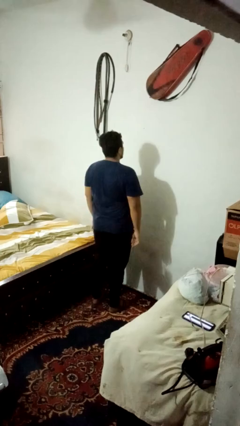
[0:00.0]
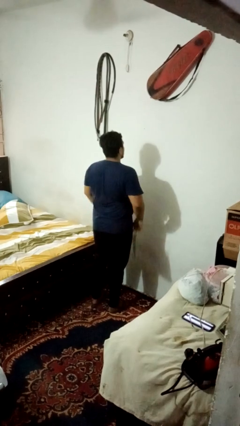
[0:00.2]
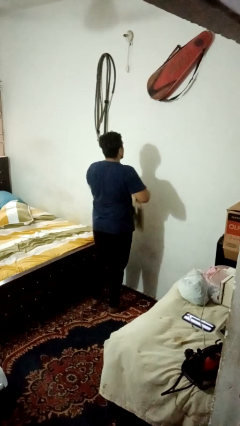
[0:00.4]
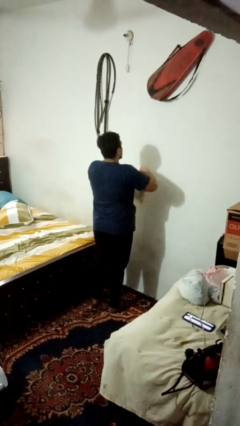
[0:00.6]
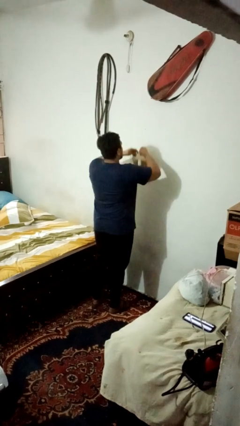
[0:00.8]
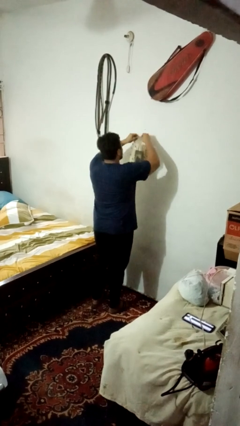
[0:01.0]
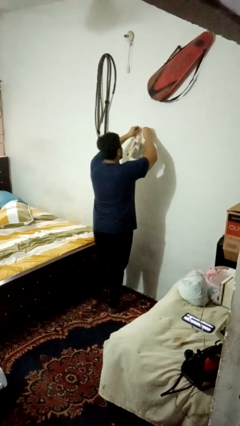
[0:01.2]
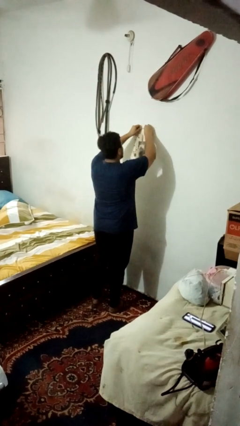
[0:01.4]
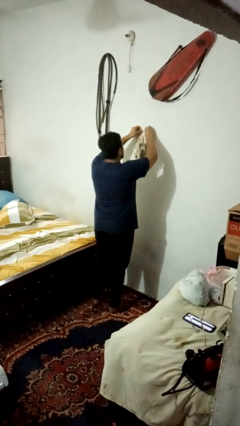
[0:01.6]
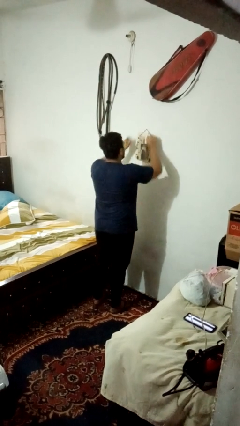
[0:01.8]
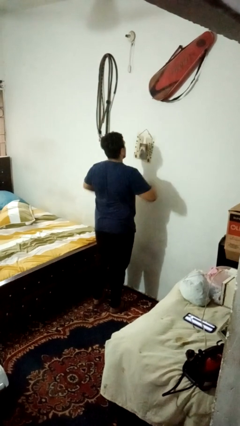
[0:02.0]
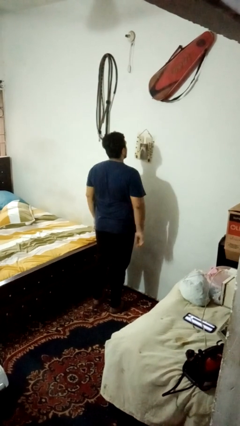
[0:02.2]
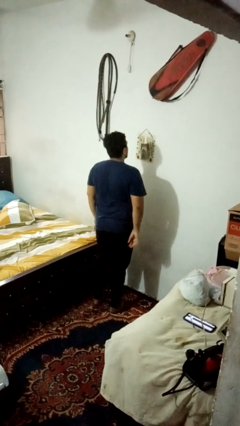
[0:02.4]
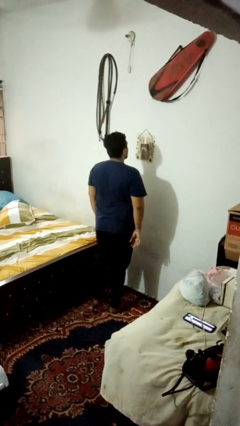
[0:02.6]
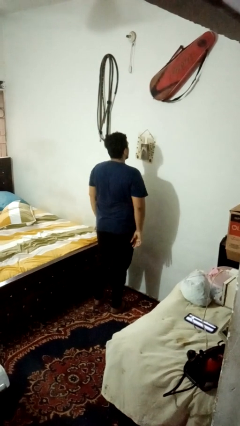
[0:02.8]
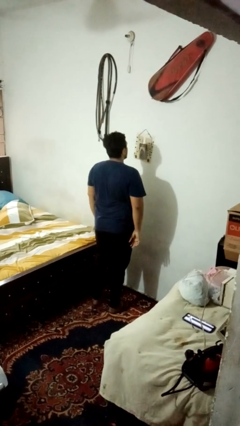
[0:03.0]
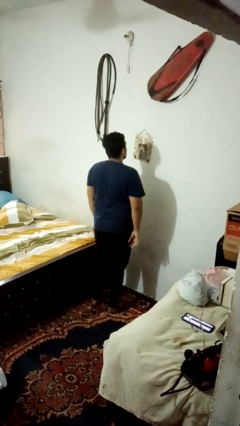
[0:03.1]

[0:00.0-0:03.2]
person puts up picture frame

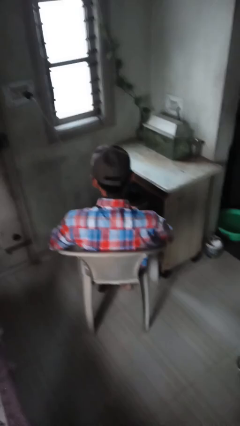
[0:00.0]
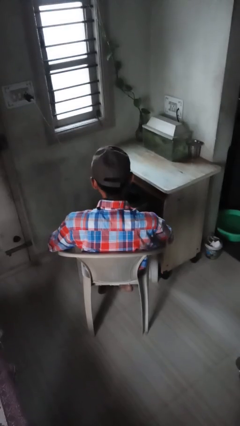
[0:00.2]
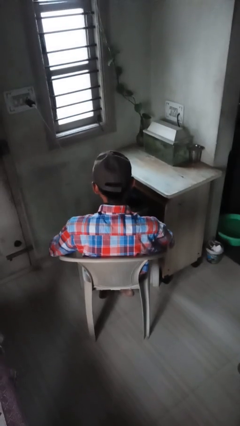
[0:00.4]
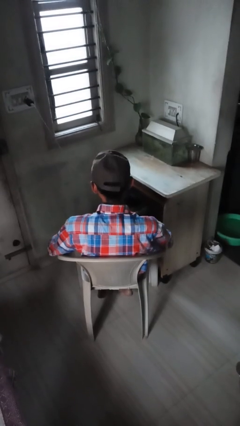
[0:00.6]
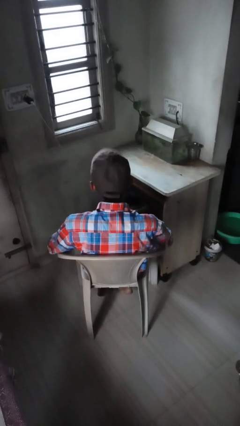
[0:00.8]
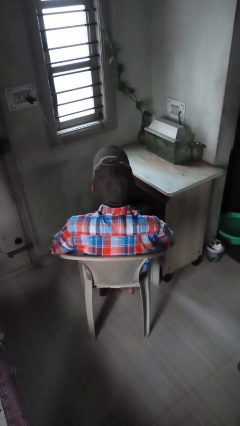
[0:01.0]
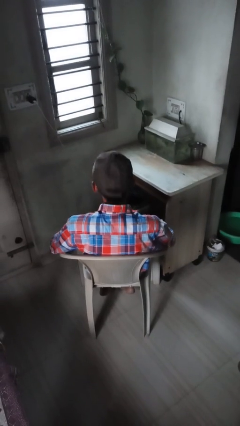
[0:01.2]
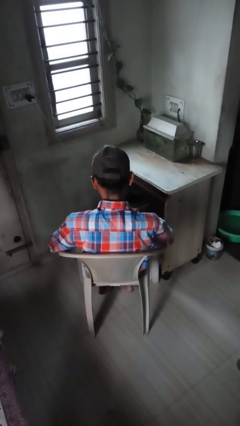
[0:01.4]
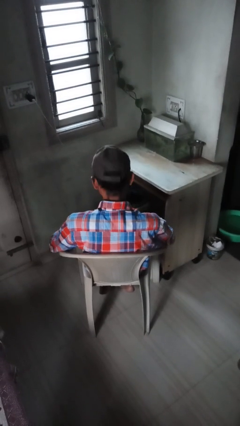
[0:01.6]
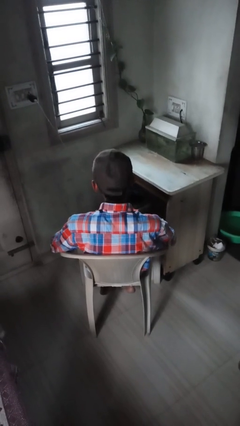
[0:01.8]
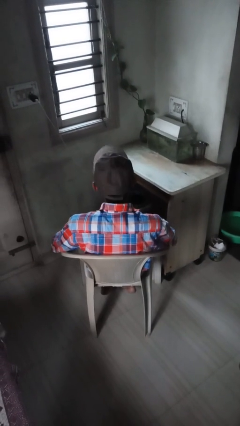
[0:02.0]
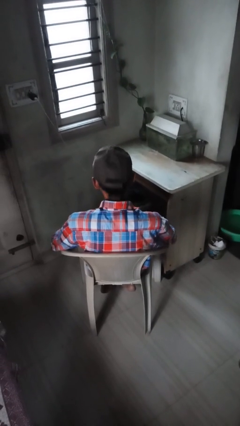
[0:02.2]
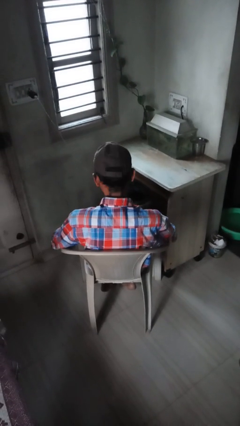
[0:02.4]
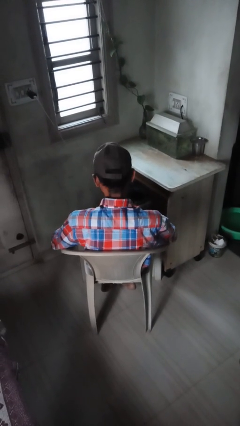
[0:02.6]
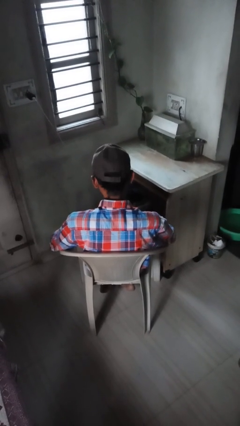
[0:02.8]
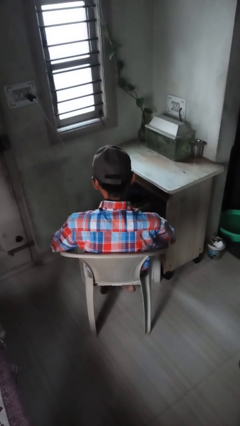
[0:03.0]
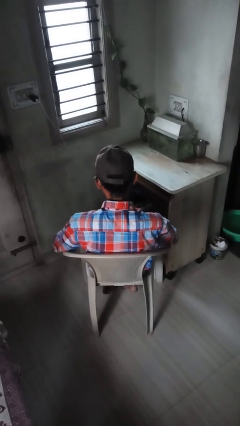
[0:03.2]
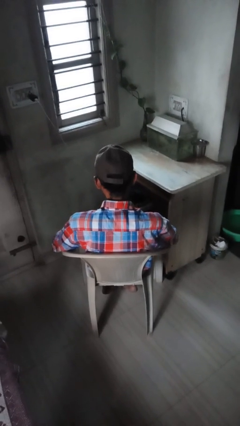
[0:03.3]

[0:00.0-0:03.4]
person nods head

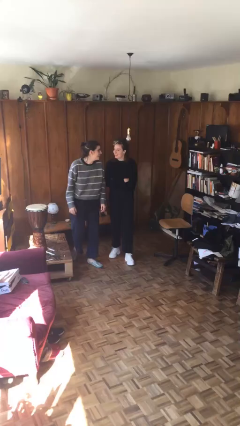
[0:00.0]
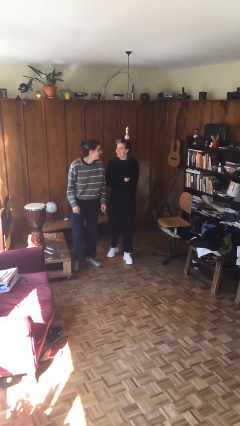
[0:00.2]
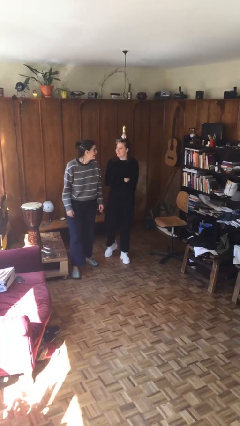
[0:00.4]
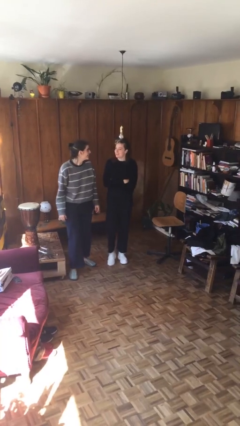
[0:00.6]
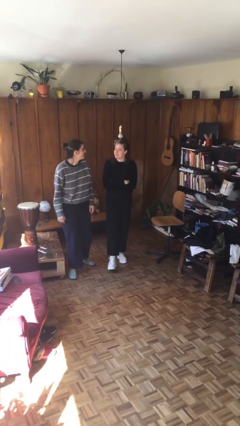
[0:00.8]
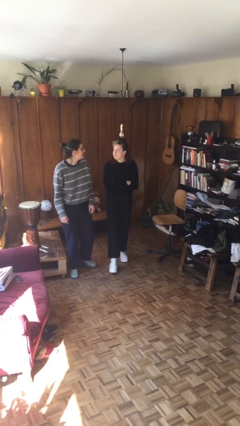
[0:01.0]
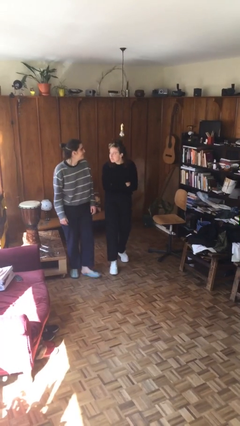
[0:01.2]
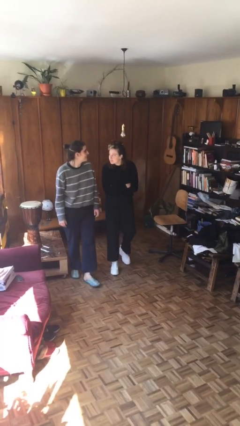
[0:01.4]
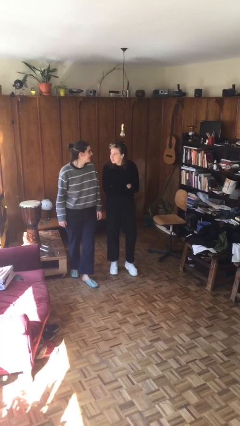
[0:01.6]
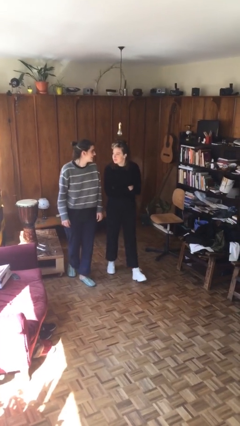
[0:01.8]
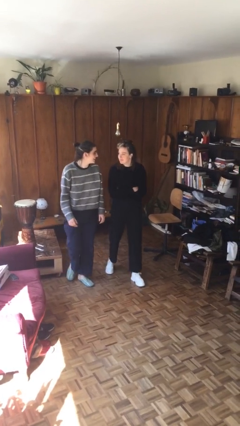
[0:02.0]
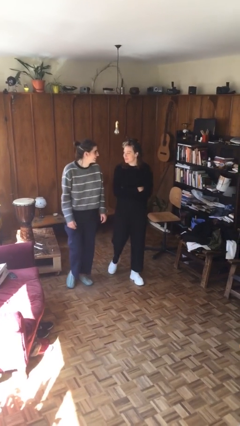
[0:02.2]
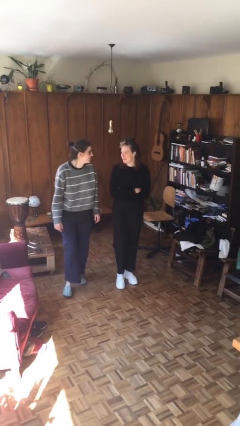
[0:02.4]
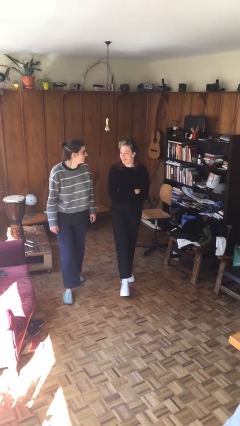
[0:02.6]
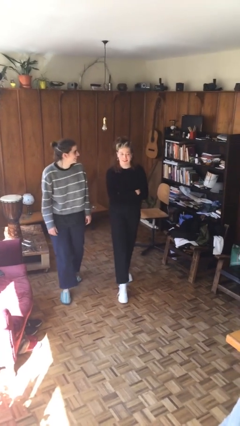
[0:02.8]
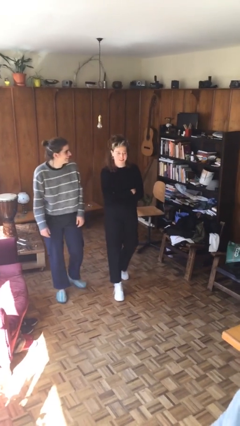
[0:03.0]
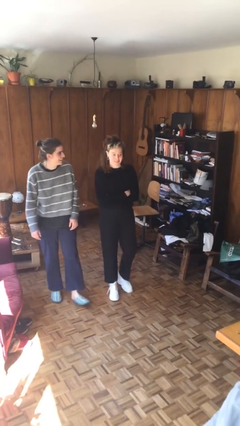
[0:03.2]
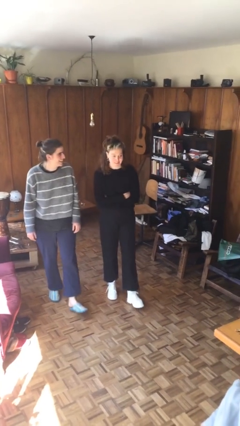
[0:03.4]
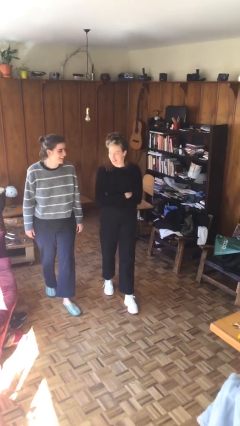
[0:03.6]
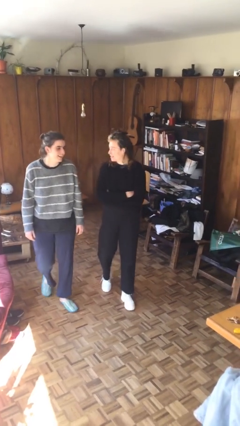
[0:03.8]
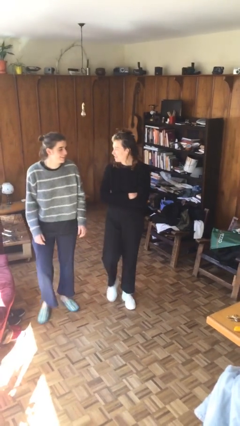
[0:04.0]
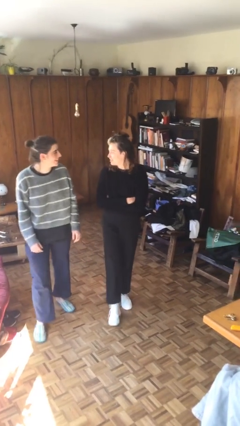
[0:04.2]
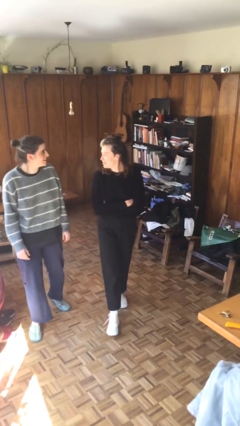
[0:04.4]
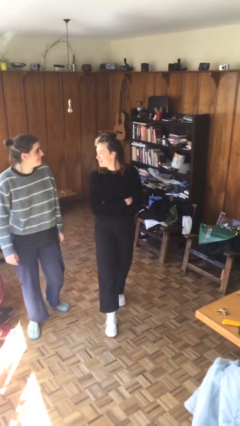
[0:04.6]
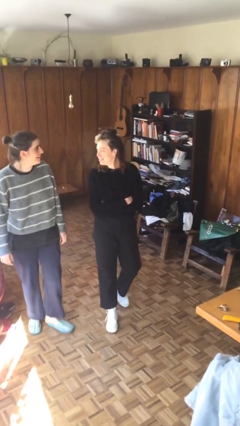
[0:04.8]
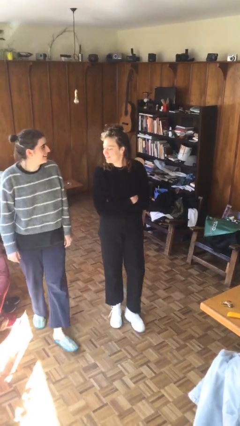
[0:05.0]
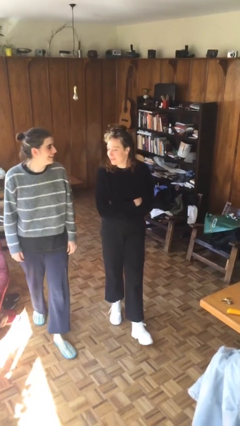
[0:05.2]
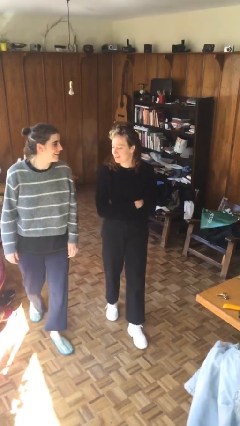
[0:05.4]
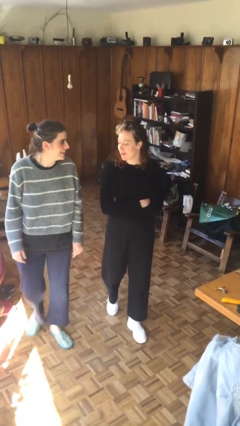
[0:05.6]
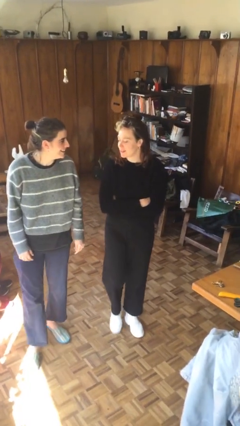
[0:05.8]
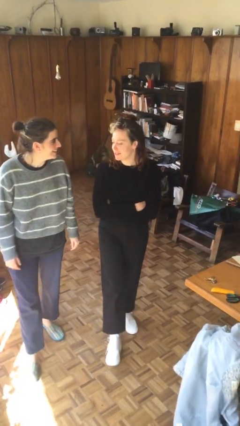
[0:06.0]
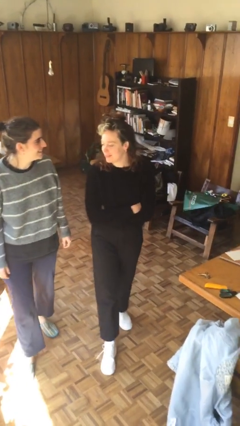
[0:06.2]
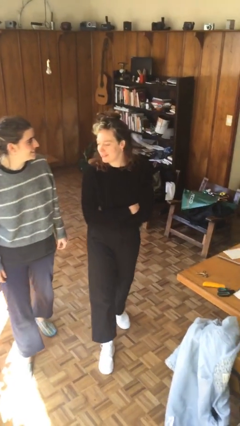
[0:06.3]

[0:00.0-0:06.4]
person talks to person

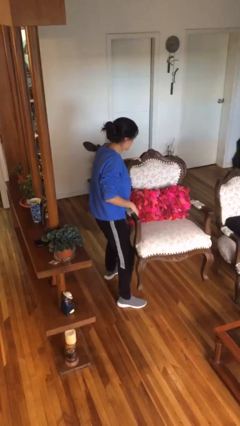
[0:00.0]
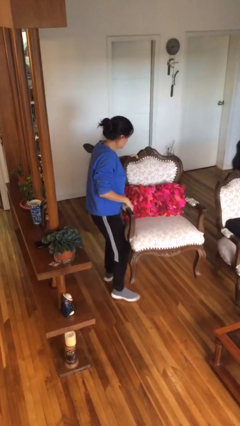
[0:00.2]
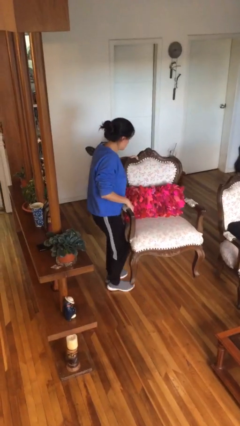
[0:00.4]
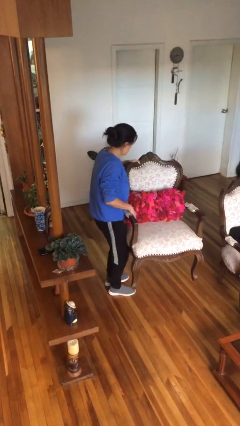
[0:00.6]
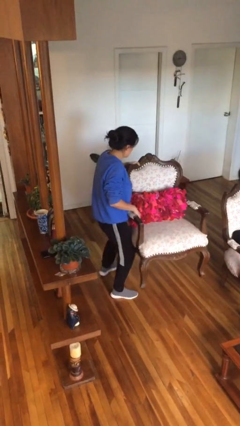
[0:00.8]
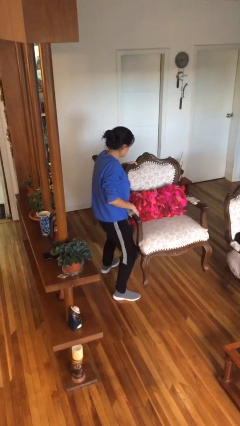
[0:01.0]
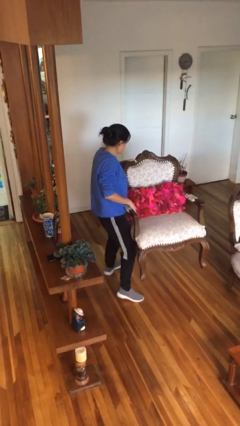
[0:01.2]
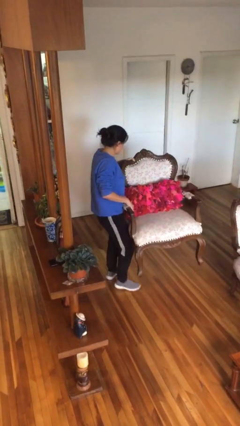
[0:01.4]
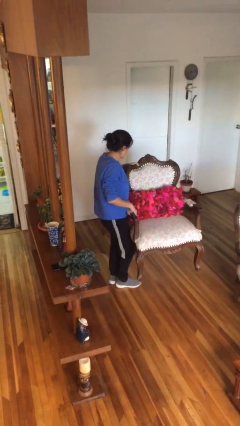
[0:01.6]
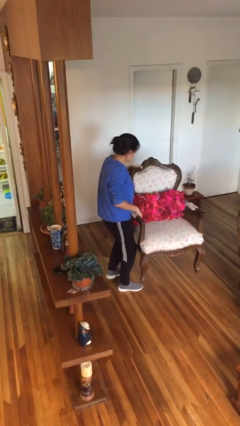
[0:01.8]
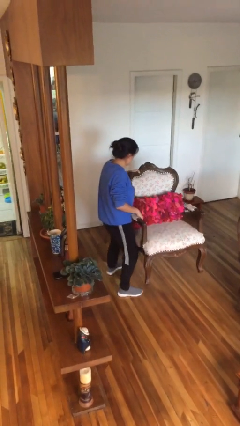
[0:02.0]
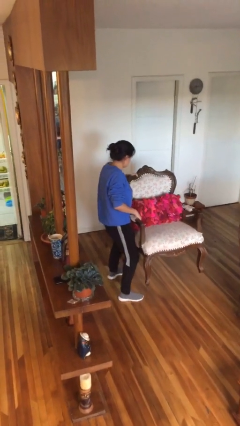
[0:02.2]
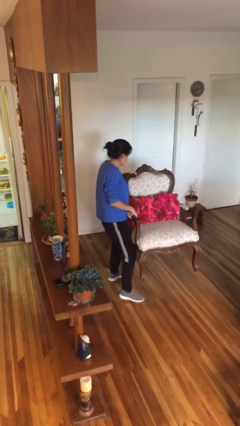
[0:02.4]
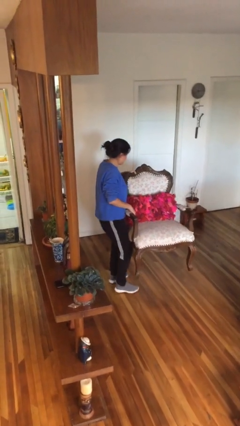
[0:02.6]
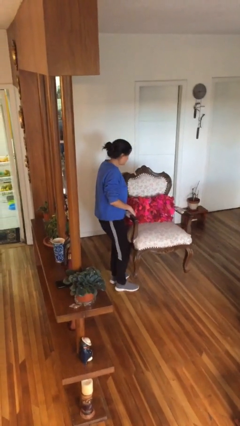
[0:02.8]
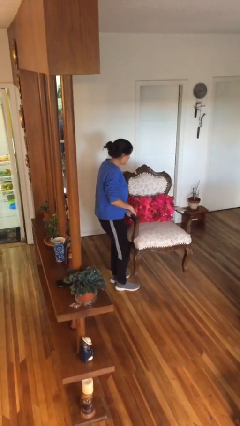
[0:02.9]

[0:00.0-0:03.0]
person carries furniture

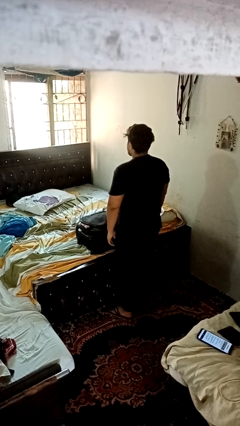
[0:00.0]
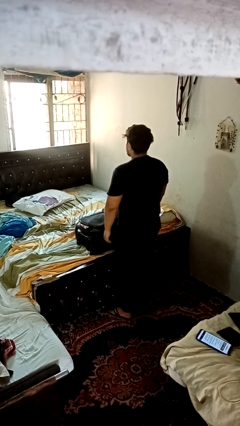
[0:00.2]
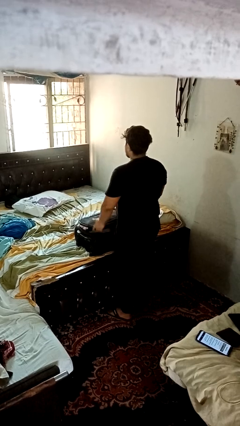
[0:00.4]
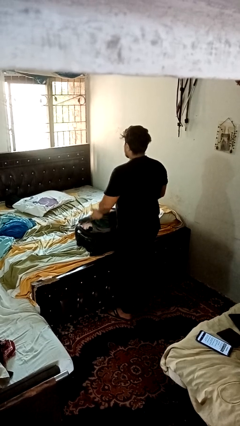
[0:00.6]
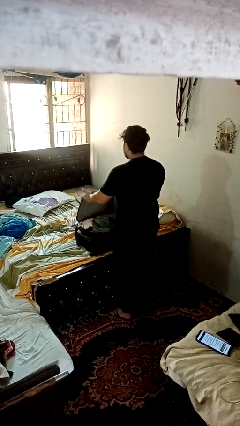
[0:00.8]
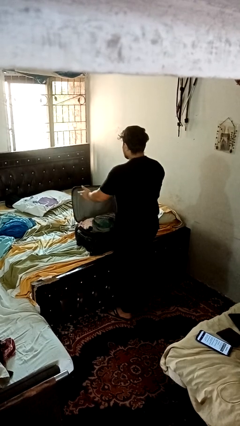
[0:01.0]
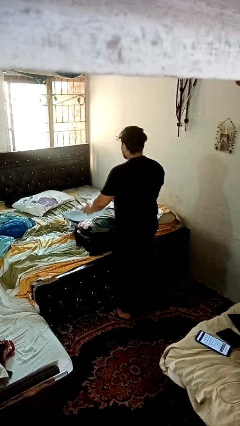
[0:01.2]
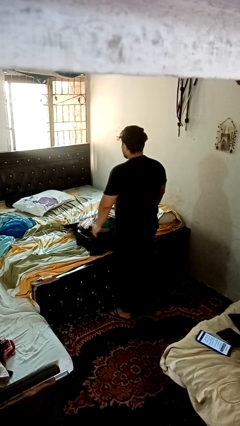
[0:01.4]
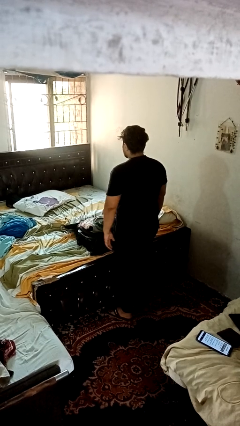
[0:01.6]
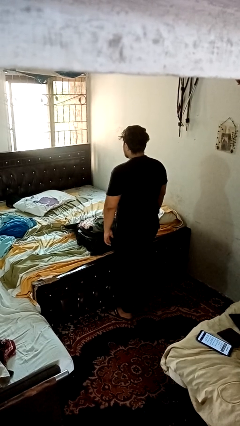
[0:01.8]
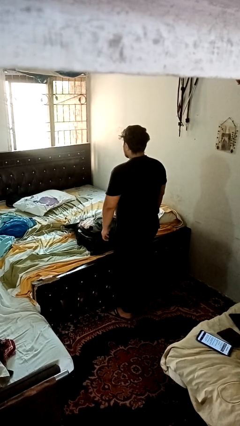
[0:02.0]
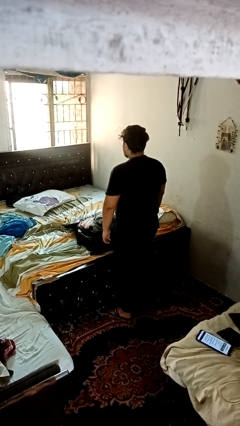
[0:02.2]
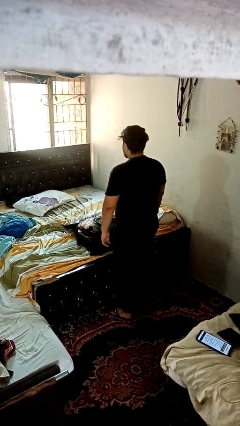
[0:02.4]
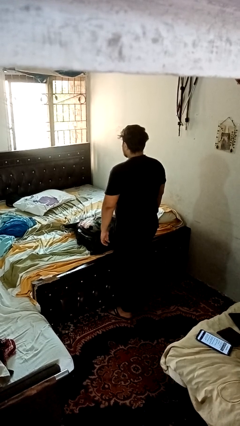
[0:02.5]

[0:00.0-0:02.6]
person opens suitcase
